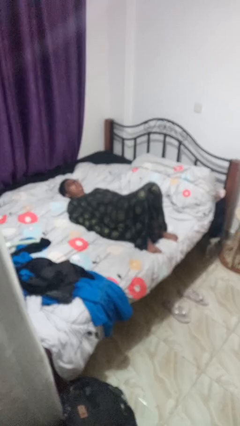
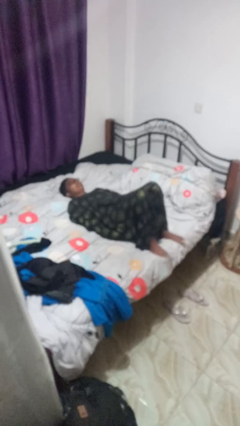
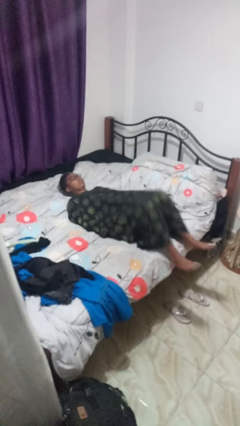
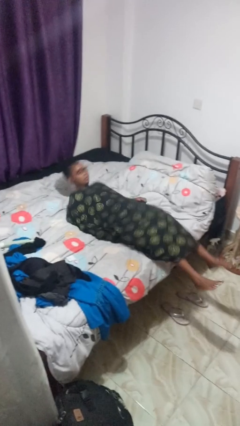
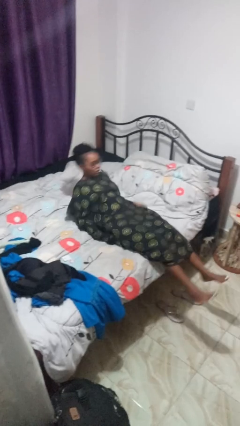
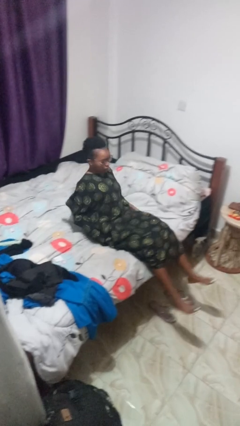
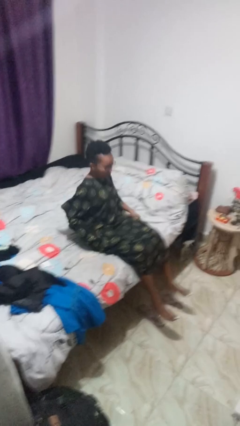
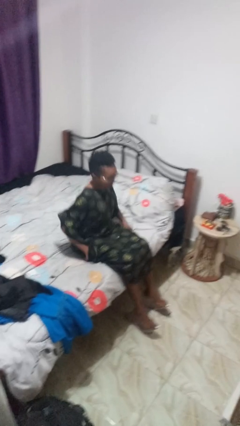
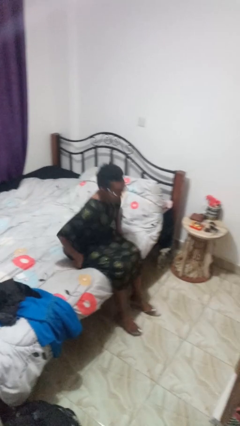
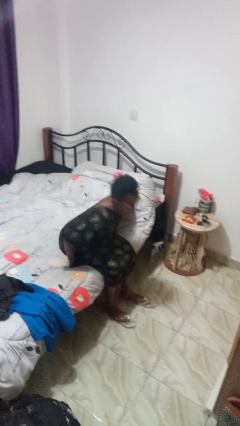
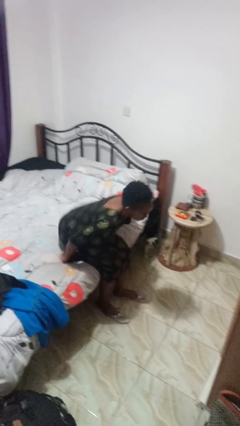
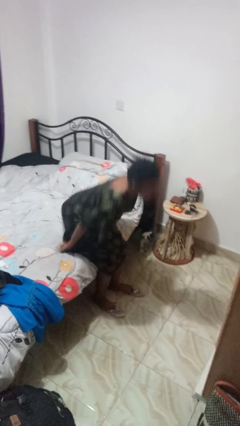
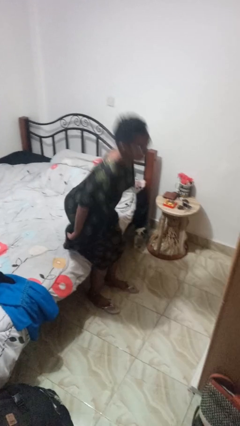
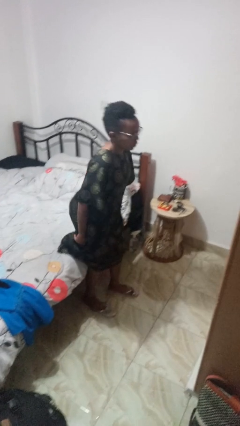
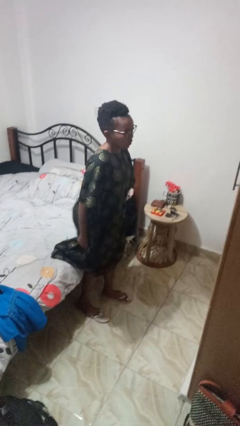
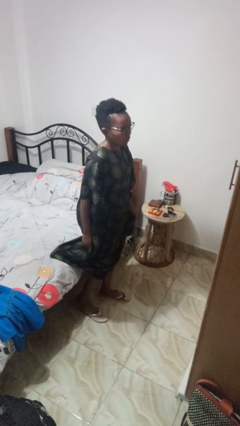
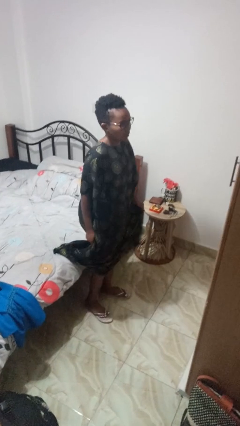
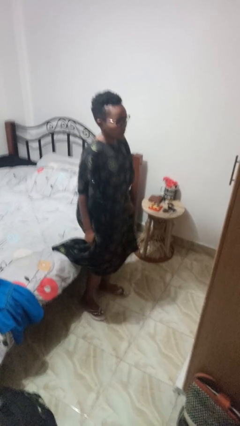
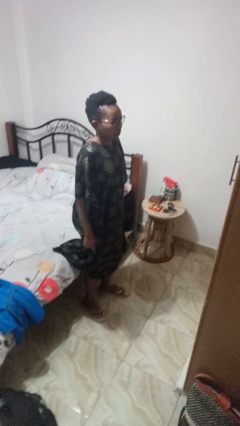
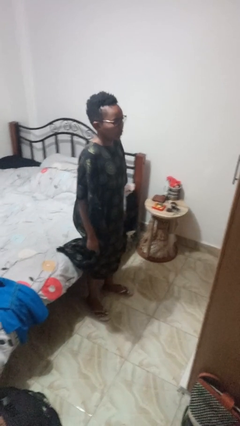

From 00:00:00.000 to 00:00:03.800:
person stands up

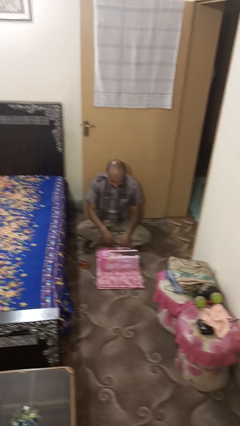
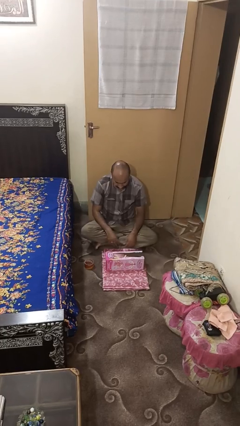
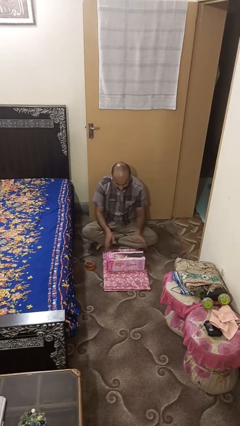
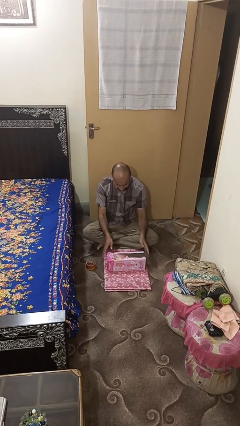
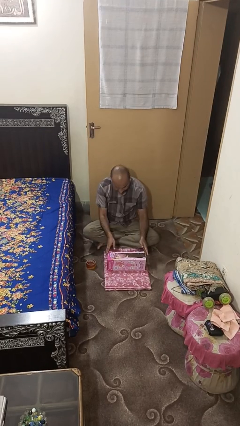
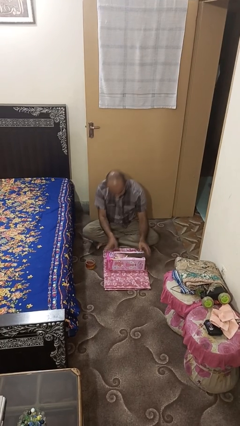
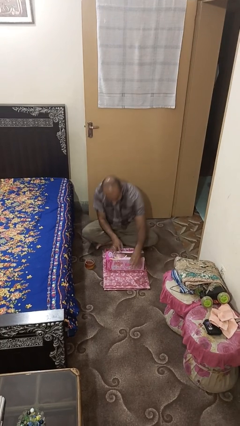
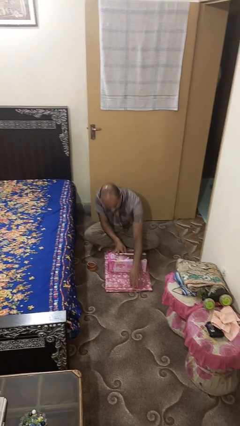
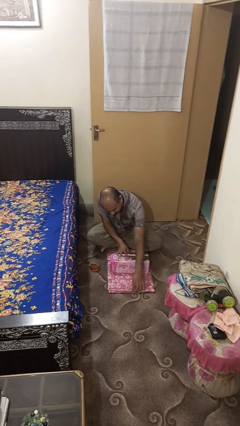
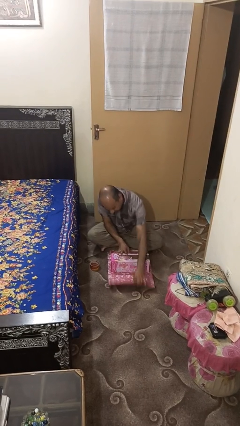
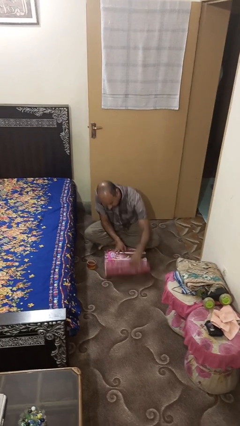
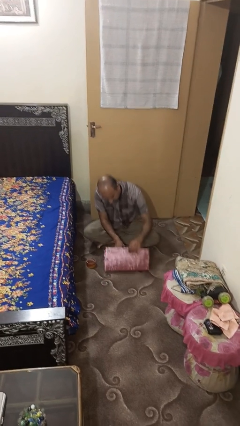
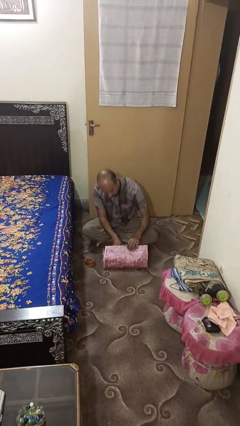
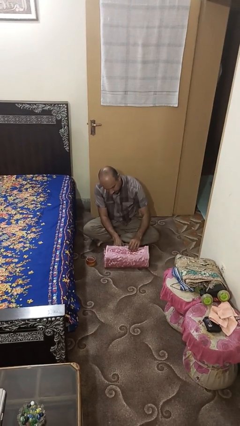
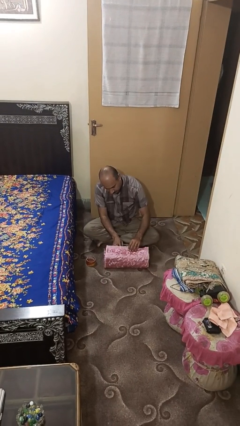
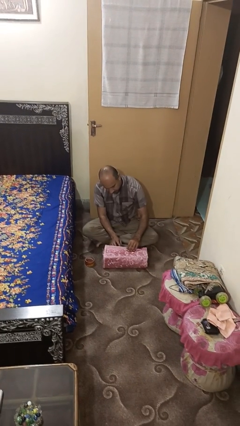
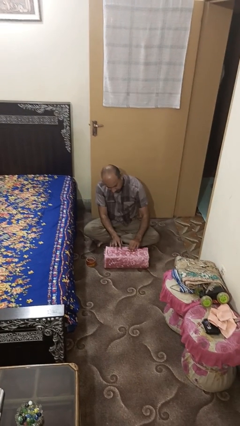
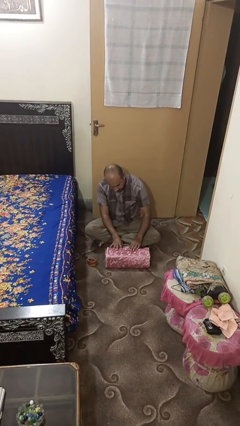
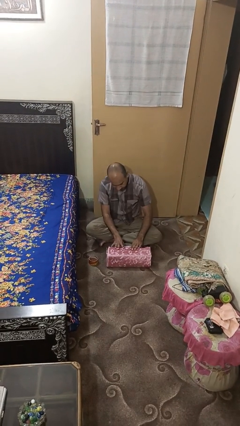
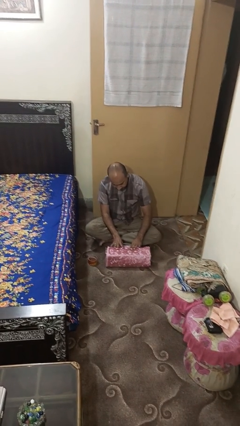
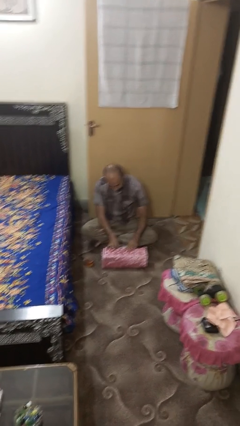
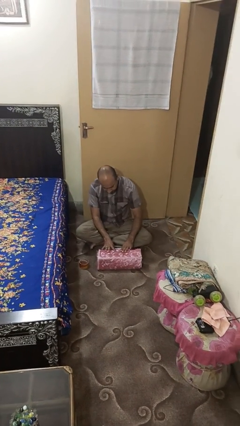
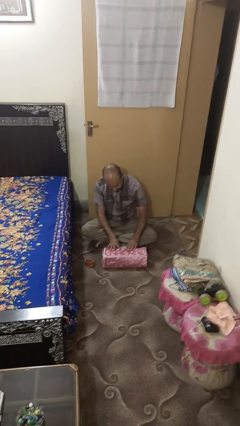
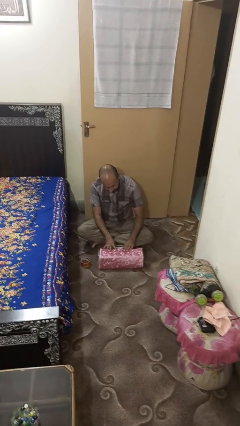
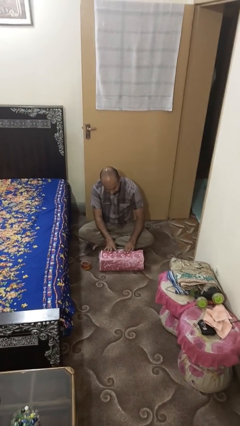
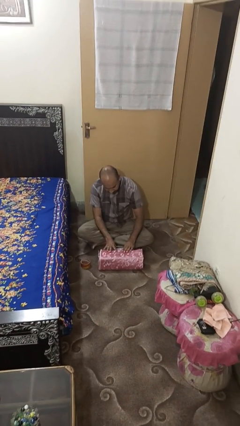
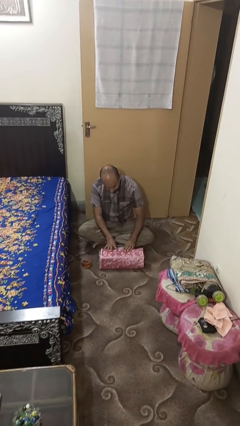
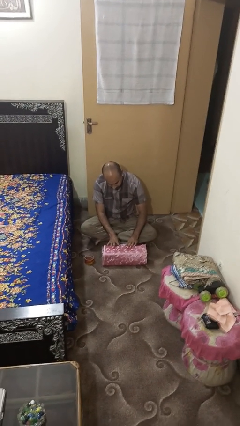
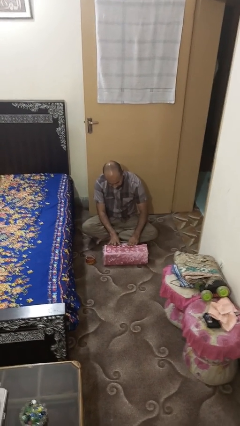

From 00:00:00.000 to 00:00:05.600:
person wraps box

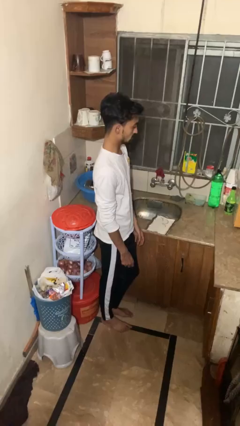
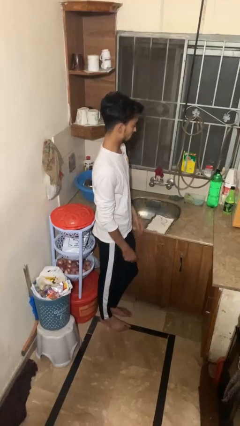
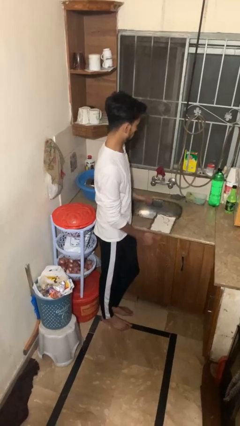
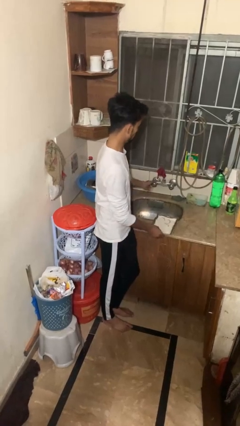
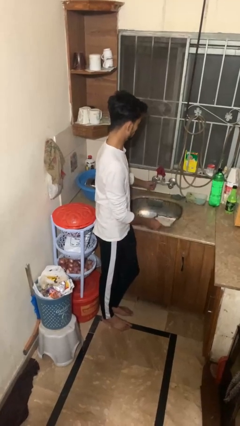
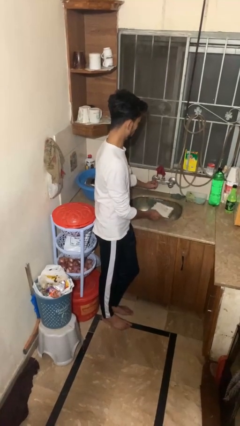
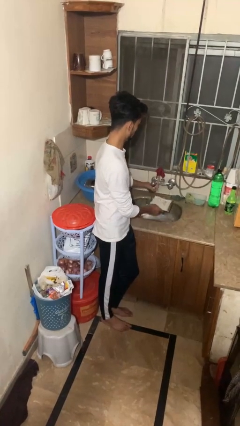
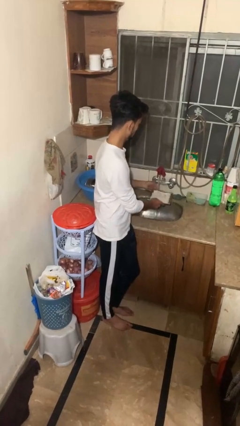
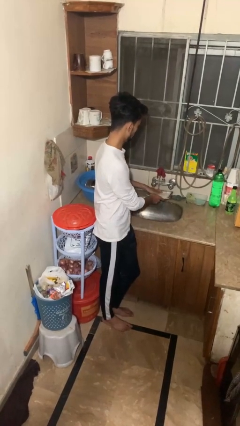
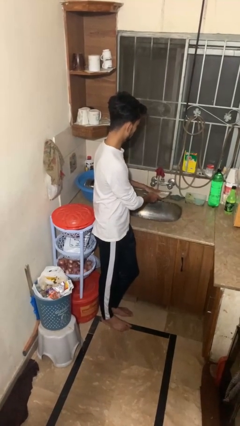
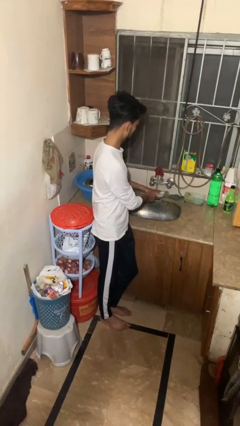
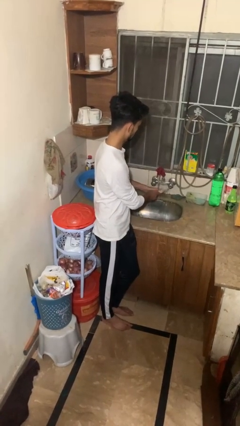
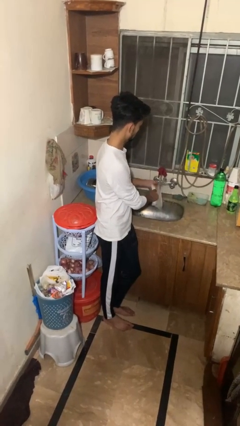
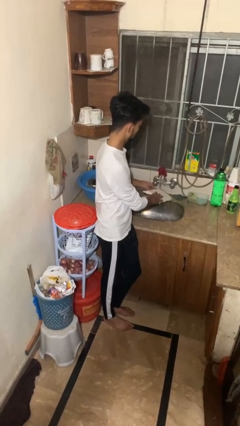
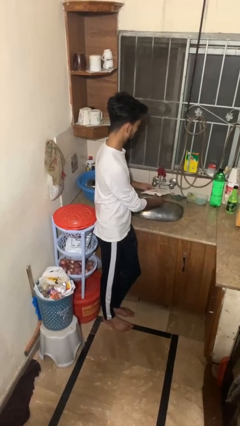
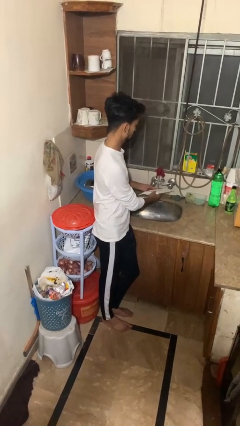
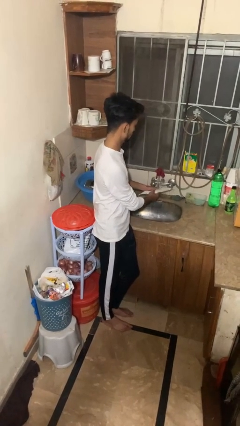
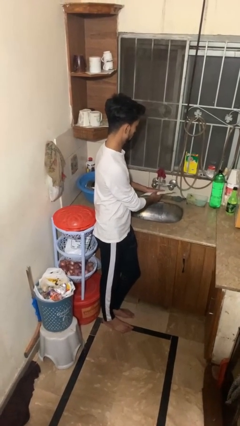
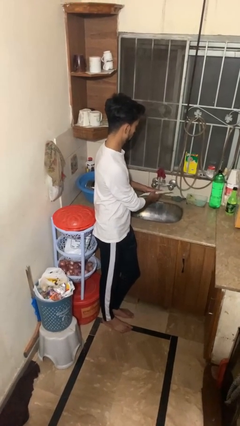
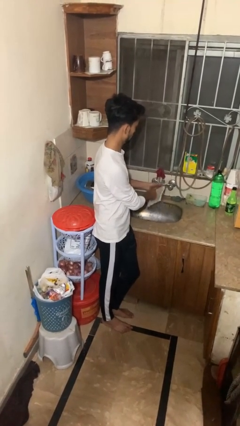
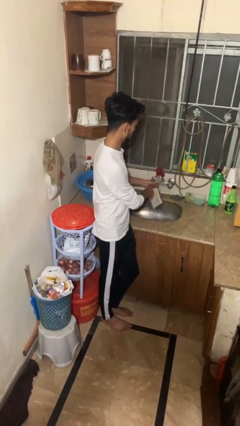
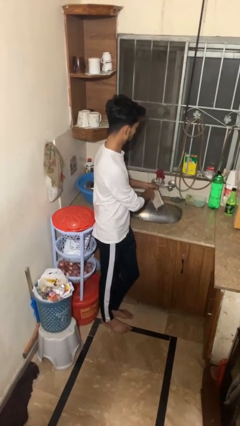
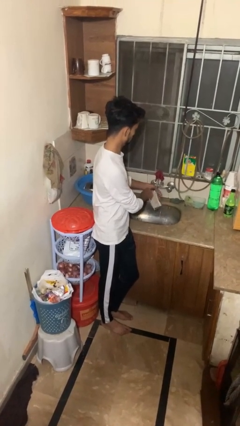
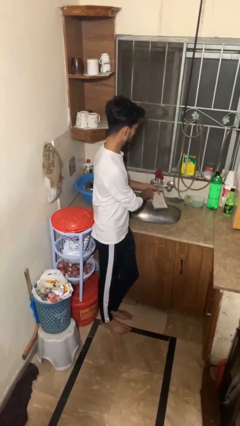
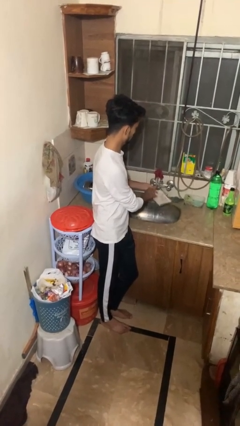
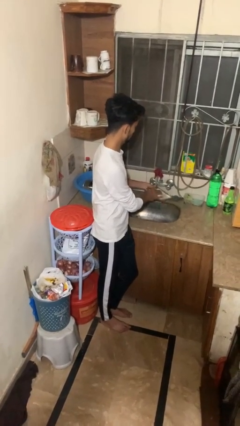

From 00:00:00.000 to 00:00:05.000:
person opens dishwasher

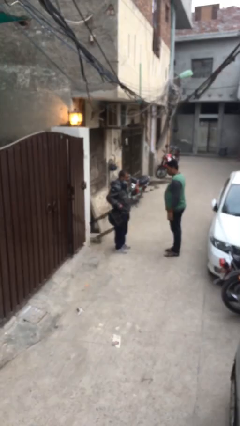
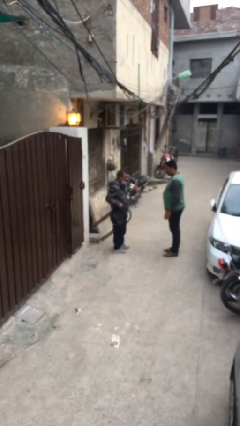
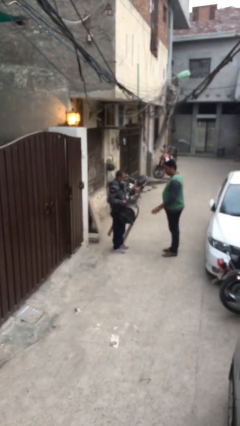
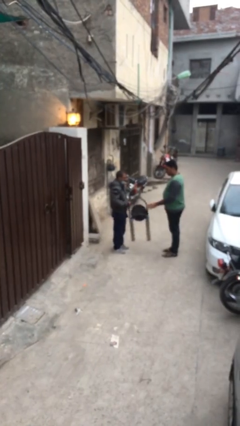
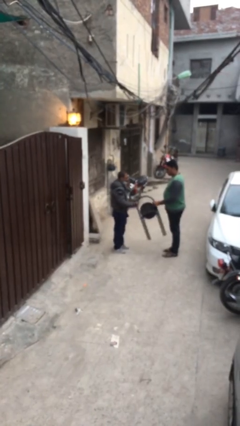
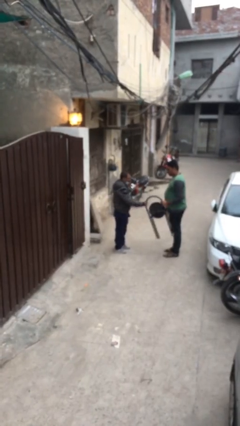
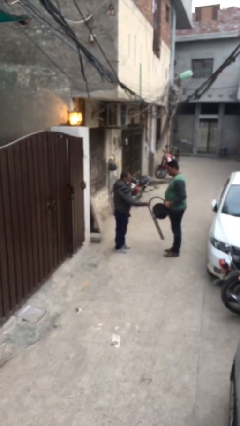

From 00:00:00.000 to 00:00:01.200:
person transfers object to person

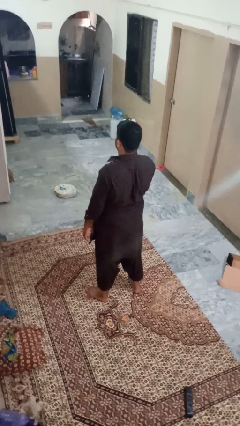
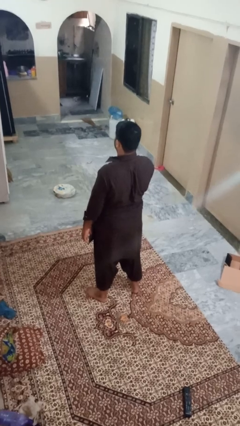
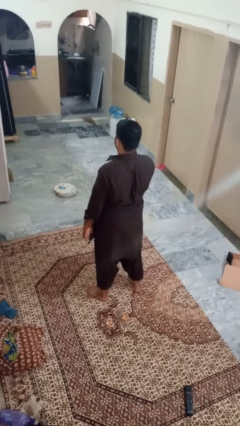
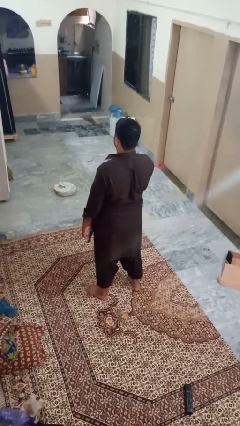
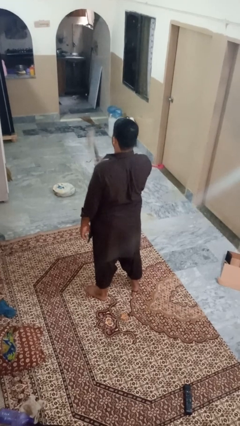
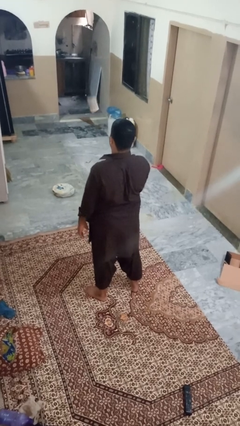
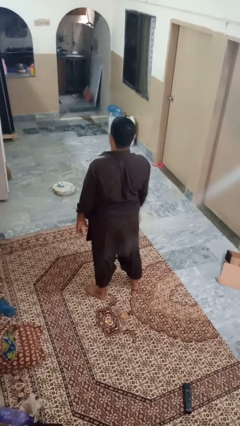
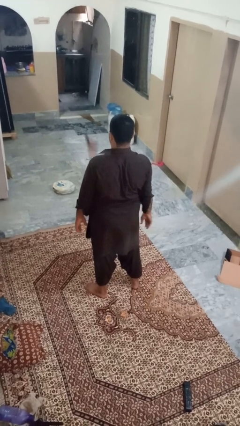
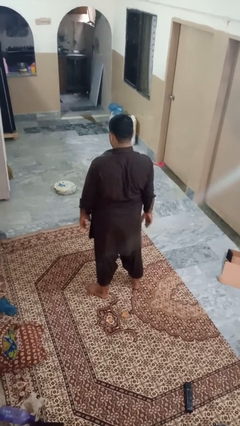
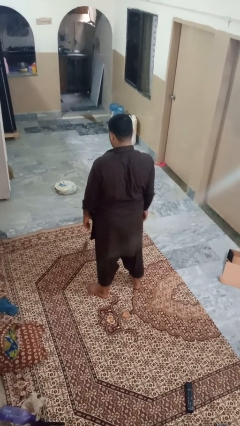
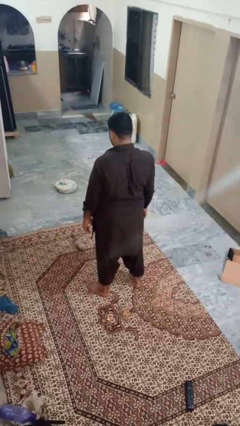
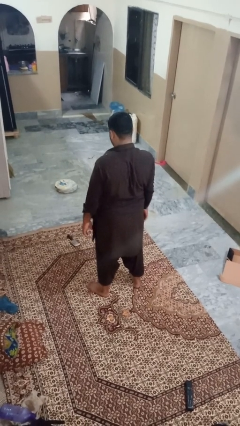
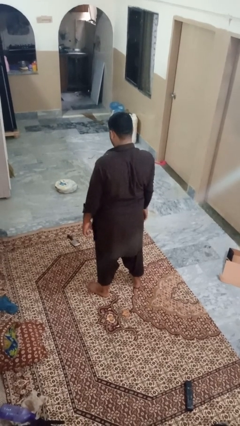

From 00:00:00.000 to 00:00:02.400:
person throws object into air
